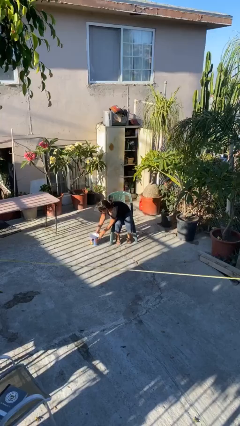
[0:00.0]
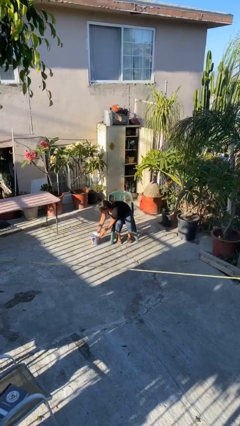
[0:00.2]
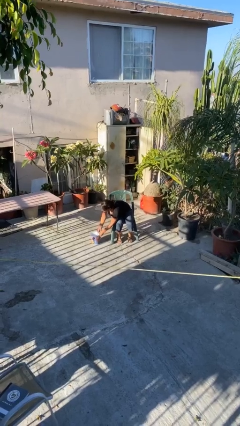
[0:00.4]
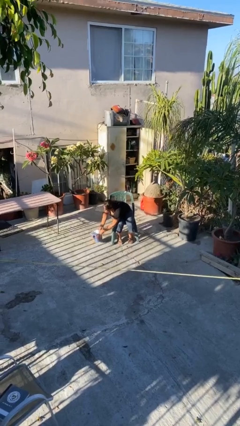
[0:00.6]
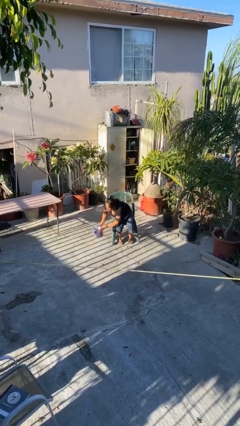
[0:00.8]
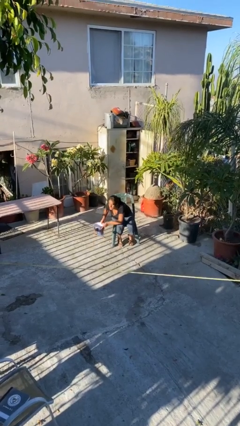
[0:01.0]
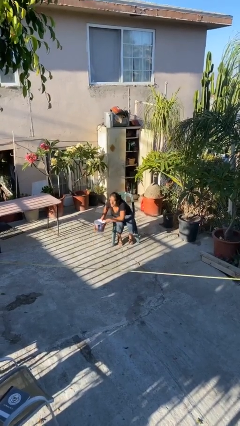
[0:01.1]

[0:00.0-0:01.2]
person picks up object from floor

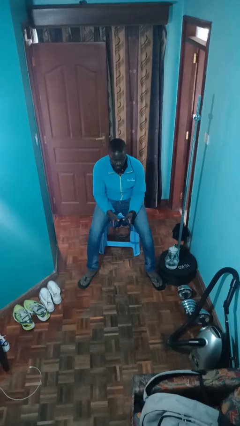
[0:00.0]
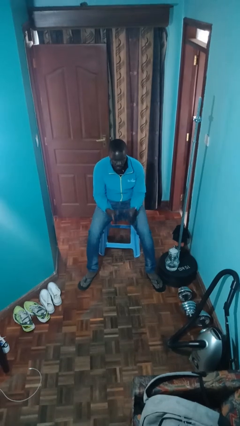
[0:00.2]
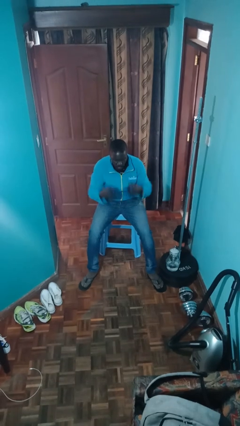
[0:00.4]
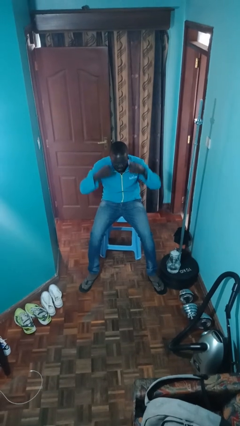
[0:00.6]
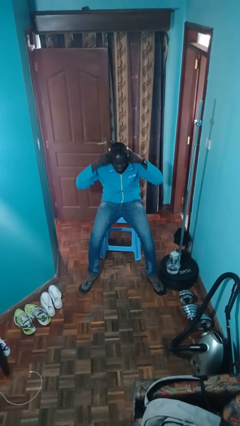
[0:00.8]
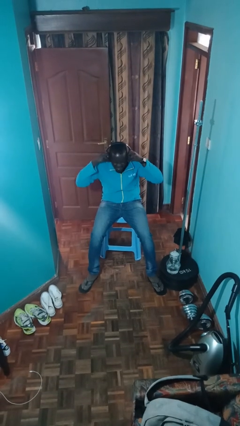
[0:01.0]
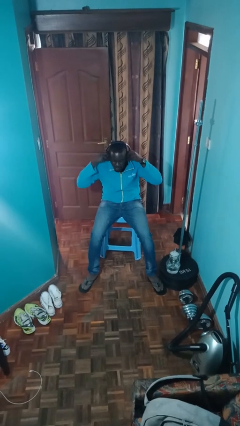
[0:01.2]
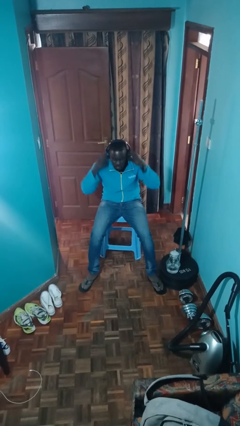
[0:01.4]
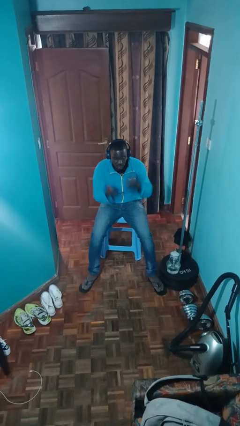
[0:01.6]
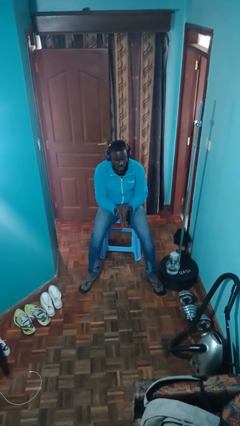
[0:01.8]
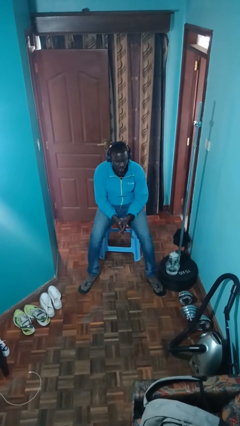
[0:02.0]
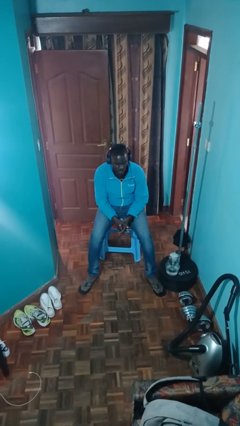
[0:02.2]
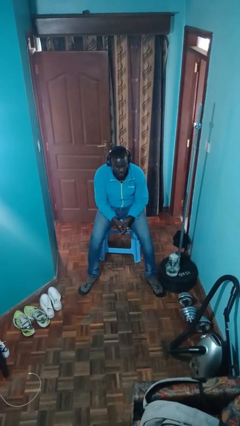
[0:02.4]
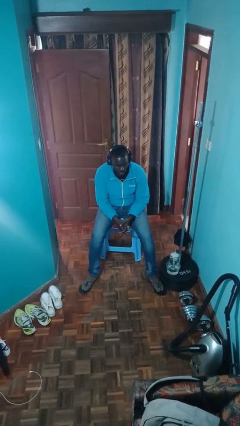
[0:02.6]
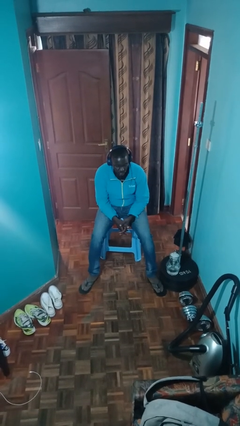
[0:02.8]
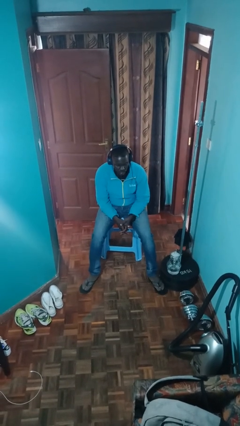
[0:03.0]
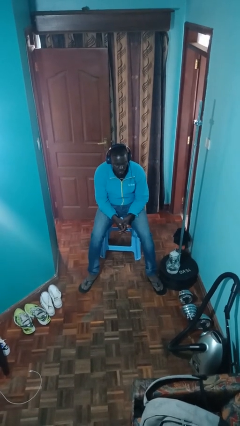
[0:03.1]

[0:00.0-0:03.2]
person puts on headphones

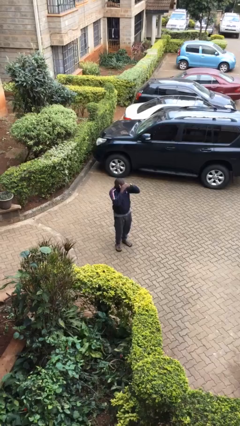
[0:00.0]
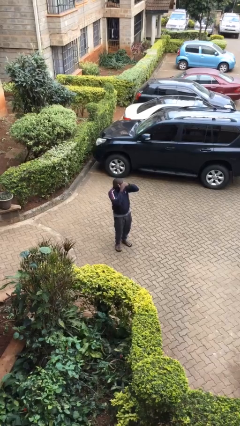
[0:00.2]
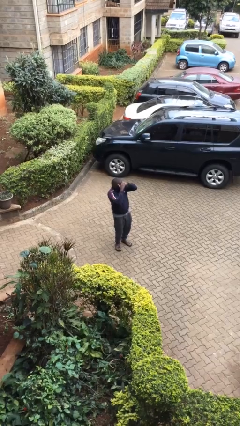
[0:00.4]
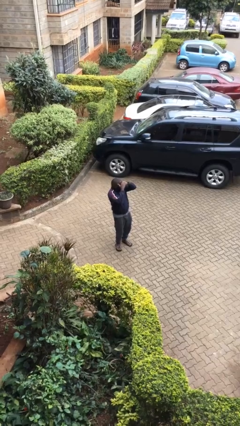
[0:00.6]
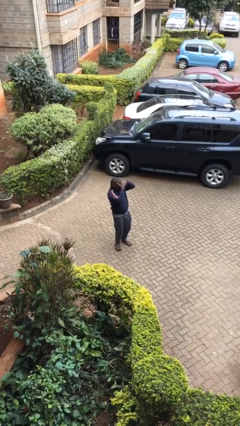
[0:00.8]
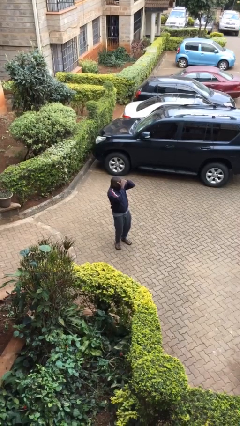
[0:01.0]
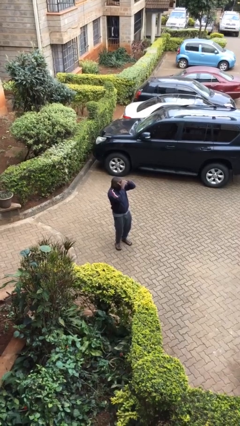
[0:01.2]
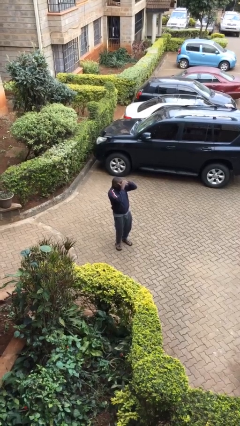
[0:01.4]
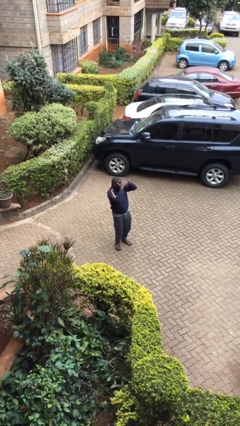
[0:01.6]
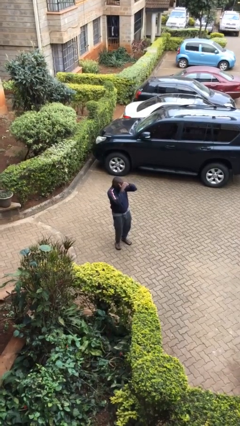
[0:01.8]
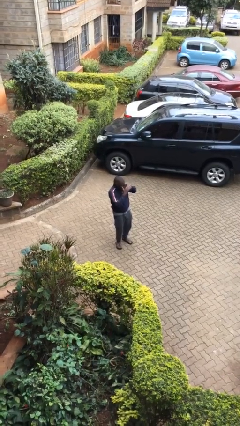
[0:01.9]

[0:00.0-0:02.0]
person shades eyes

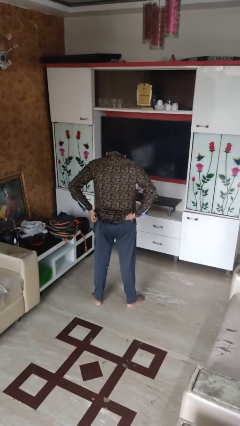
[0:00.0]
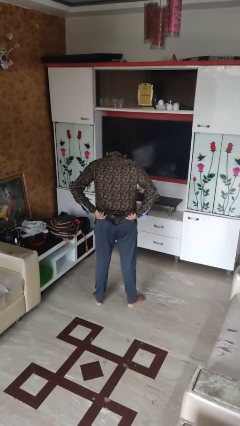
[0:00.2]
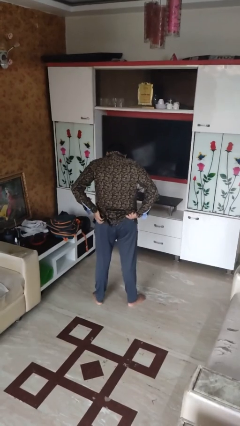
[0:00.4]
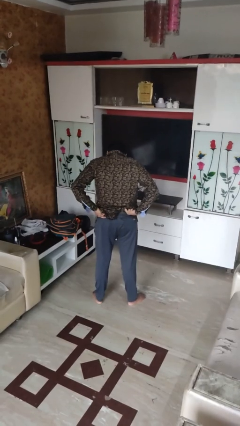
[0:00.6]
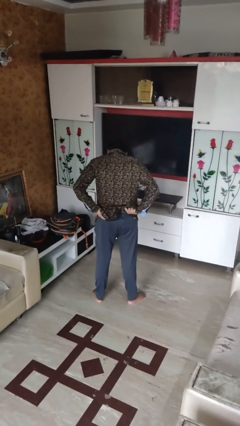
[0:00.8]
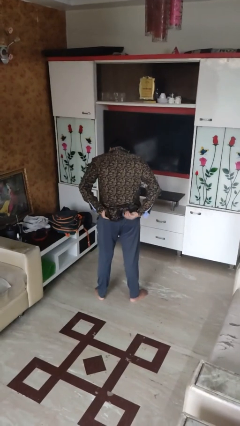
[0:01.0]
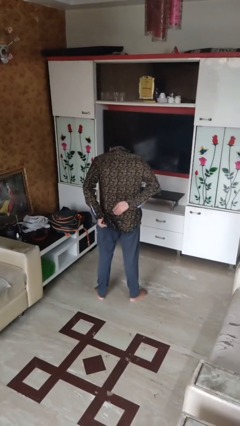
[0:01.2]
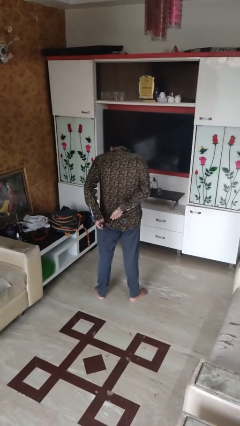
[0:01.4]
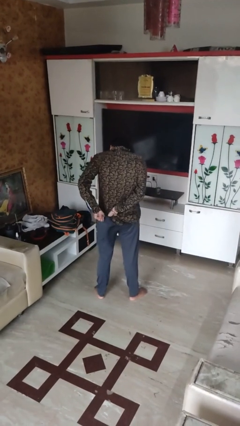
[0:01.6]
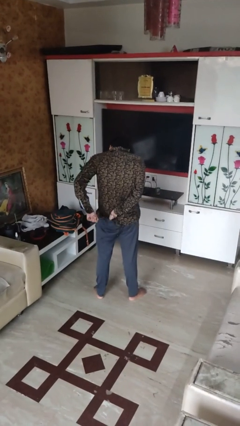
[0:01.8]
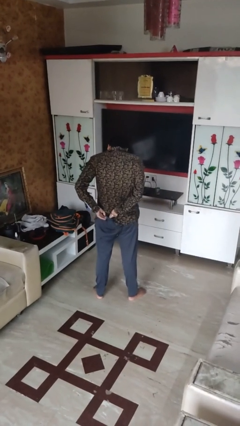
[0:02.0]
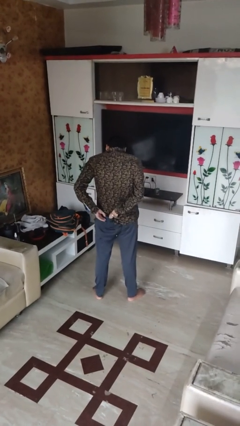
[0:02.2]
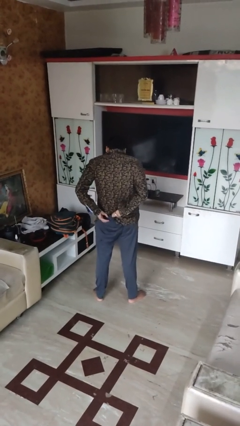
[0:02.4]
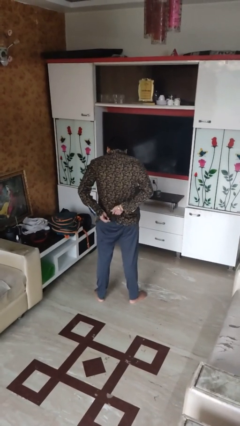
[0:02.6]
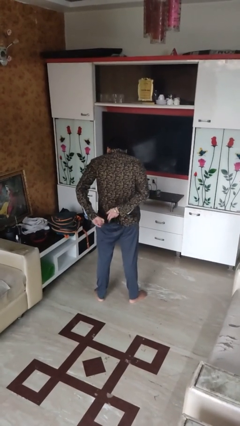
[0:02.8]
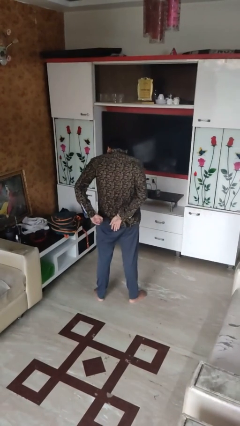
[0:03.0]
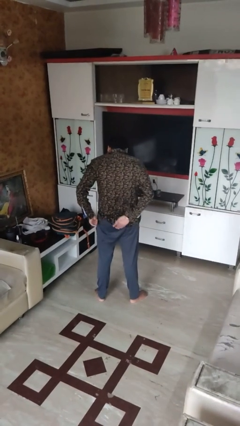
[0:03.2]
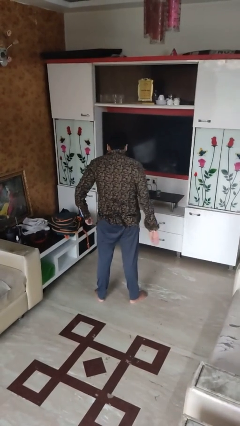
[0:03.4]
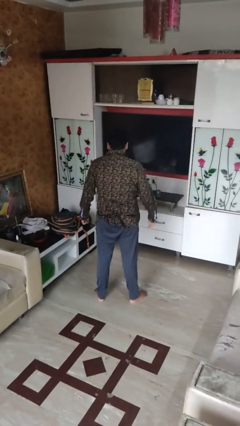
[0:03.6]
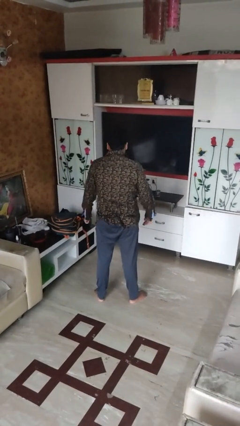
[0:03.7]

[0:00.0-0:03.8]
person tucks in shirt

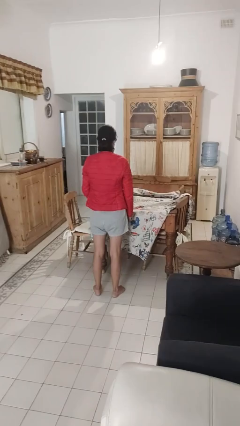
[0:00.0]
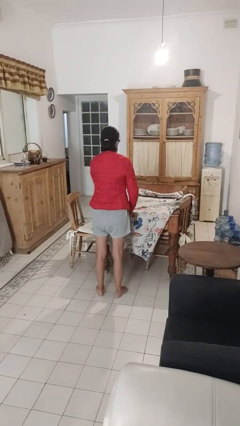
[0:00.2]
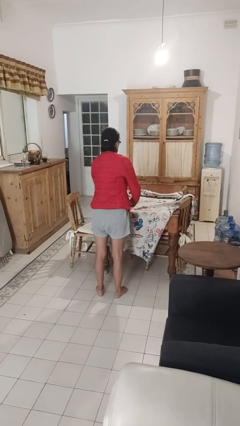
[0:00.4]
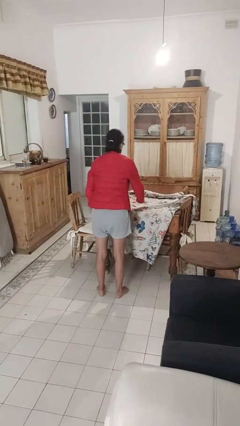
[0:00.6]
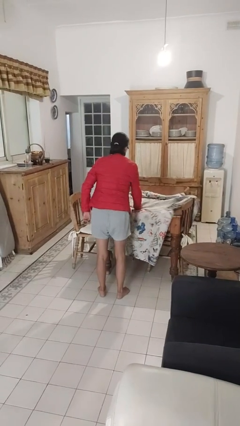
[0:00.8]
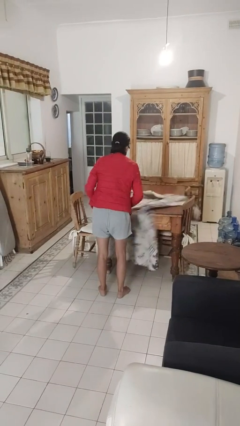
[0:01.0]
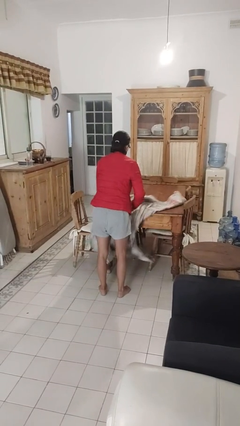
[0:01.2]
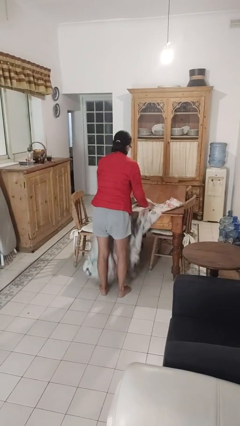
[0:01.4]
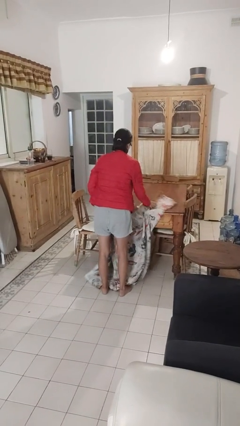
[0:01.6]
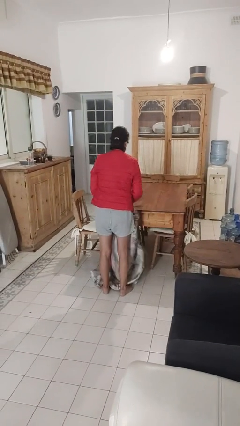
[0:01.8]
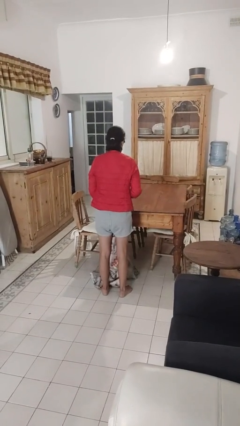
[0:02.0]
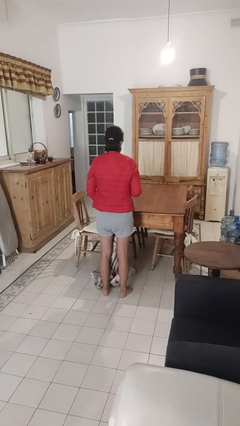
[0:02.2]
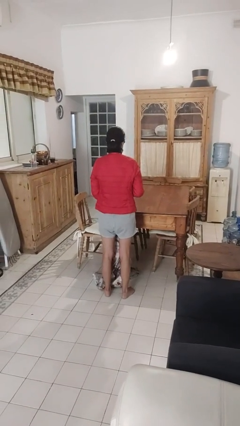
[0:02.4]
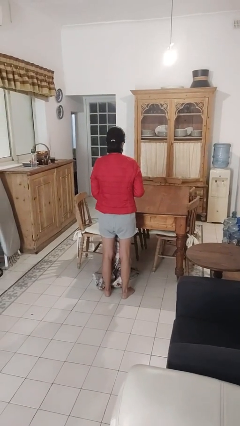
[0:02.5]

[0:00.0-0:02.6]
person folds tablecloth

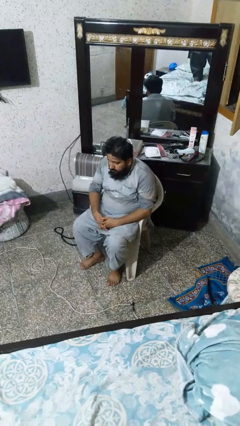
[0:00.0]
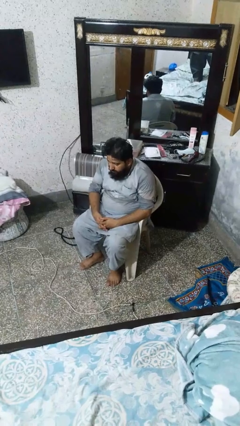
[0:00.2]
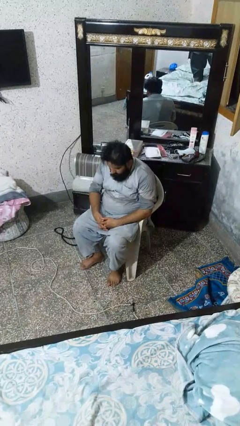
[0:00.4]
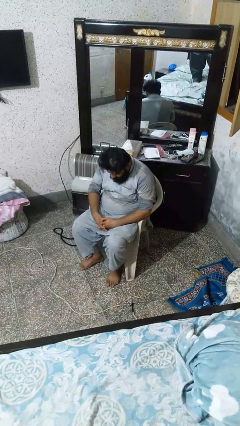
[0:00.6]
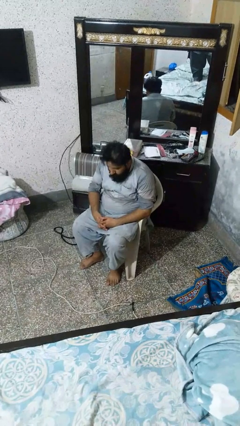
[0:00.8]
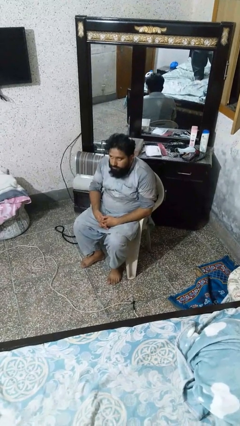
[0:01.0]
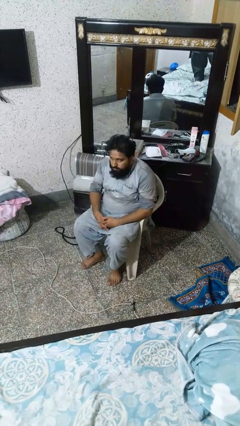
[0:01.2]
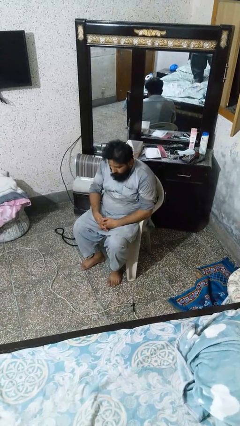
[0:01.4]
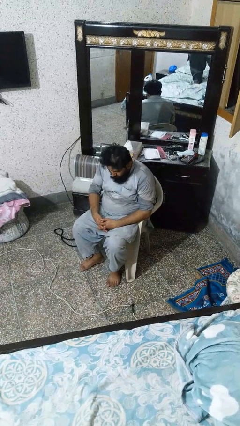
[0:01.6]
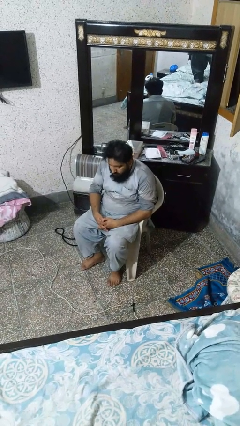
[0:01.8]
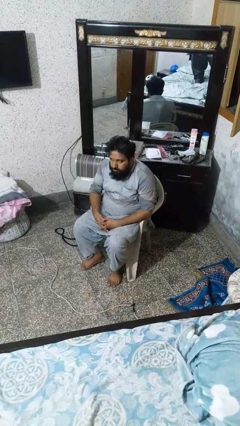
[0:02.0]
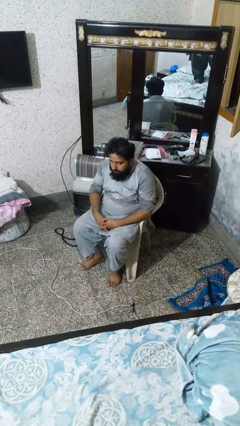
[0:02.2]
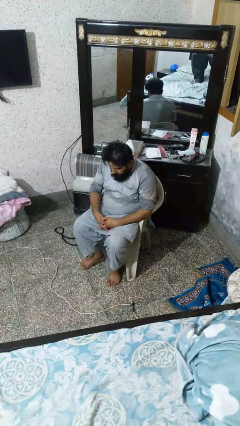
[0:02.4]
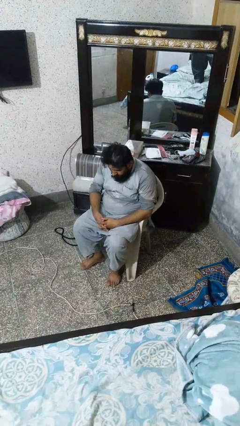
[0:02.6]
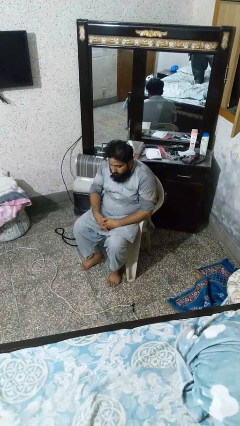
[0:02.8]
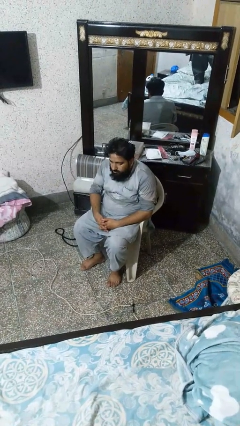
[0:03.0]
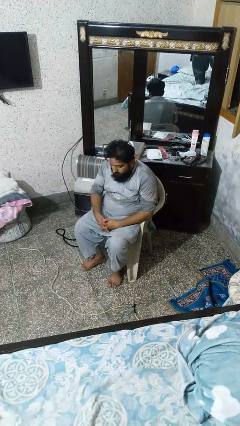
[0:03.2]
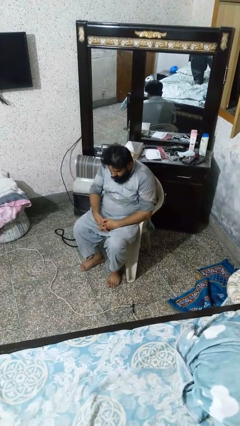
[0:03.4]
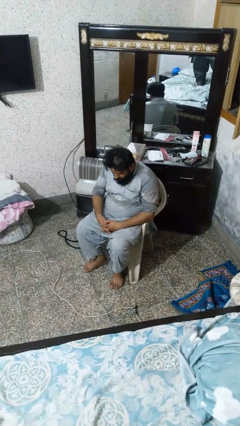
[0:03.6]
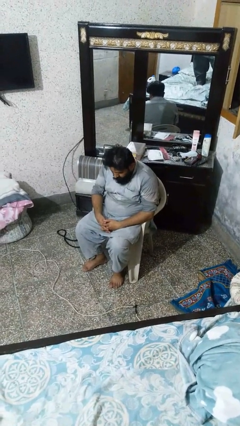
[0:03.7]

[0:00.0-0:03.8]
person nods head

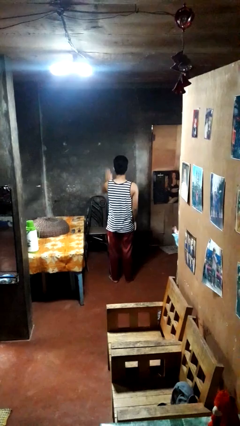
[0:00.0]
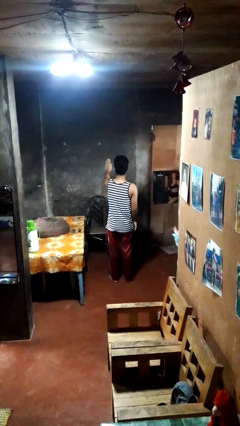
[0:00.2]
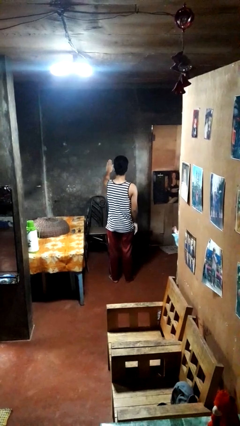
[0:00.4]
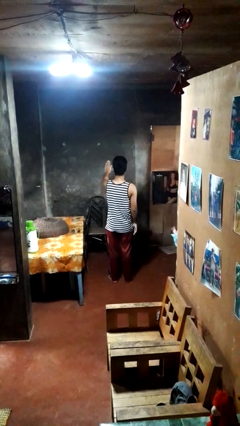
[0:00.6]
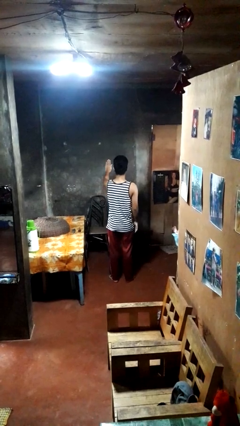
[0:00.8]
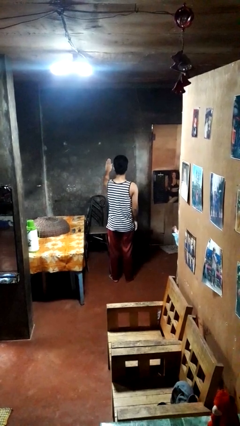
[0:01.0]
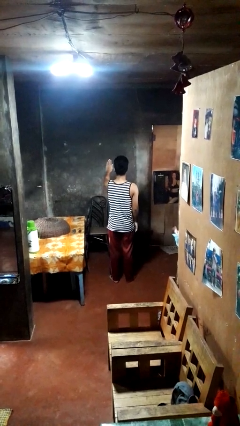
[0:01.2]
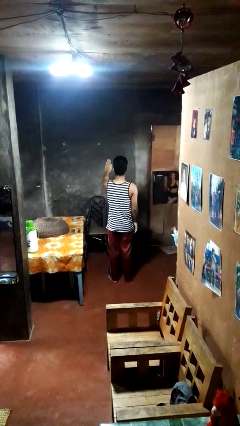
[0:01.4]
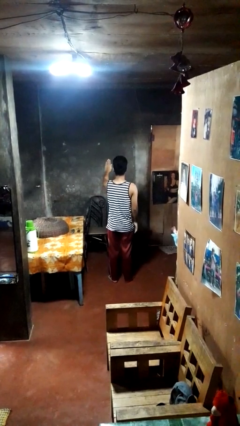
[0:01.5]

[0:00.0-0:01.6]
person gestures stop
